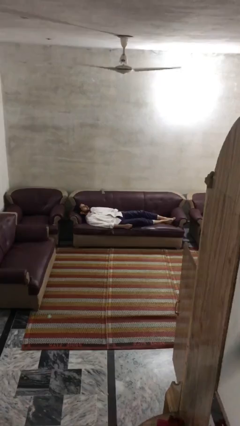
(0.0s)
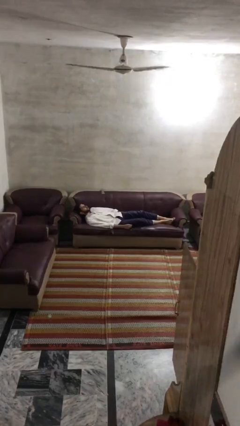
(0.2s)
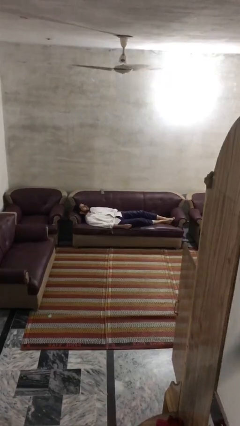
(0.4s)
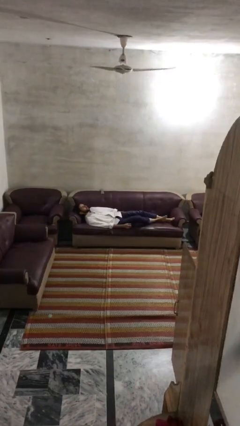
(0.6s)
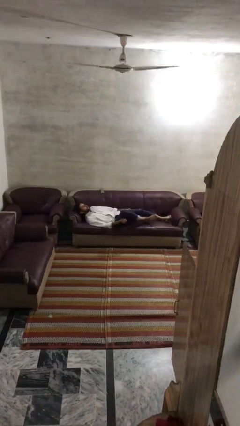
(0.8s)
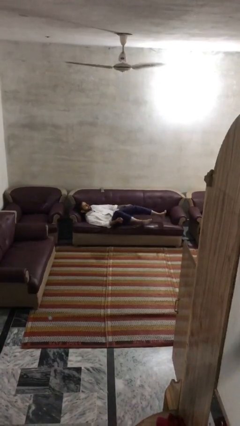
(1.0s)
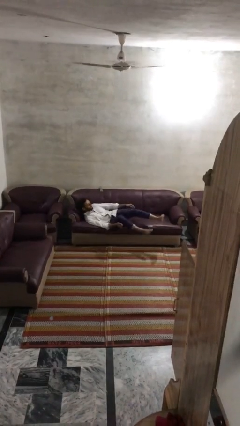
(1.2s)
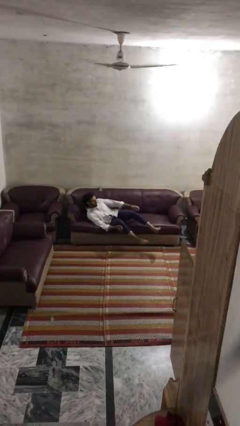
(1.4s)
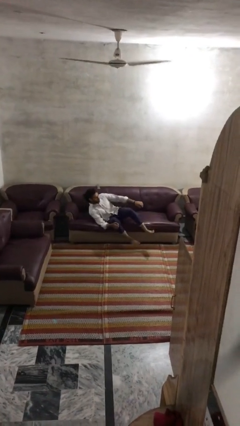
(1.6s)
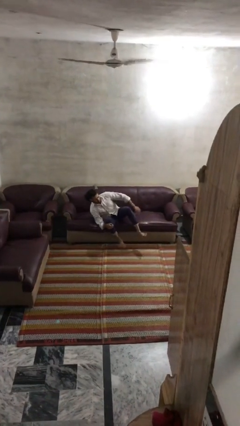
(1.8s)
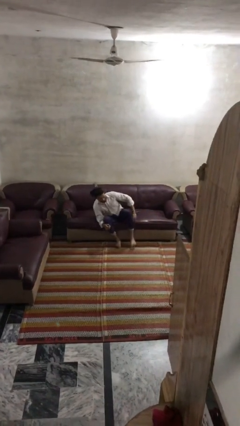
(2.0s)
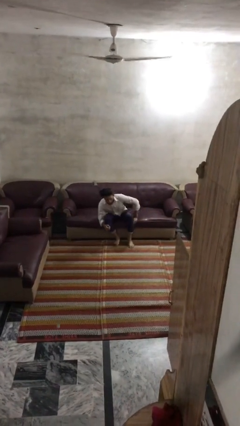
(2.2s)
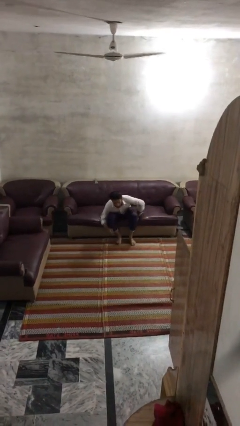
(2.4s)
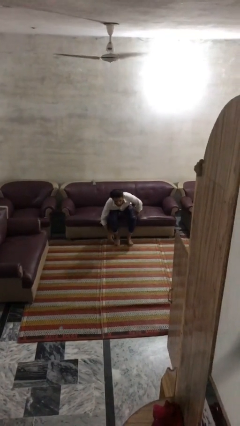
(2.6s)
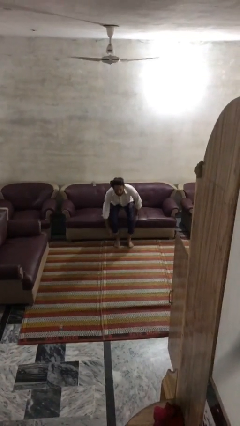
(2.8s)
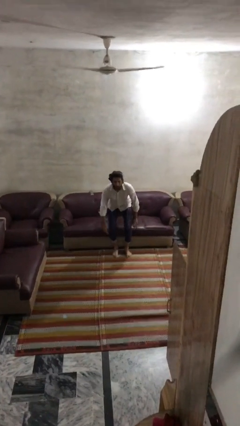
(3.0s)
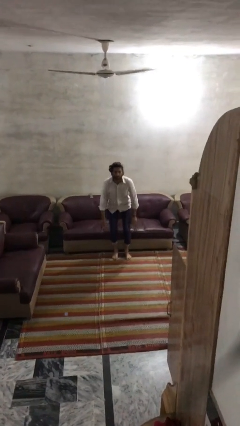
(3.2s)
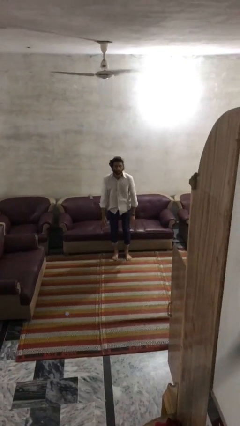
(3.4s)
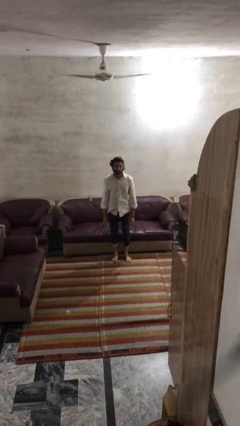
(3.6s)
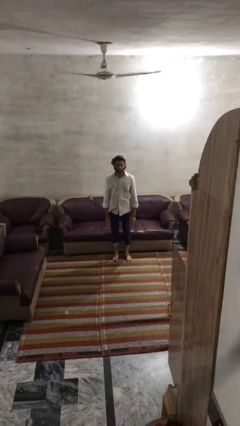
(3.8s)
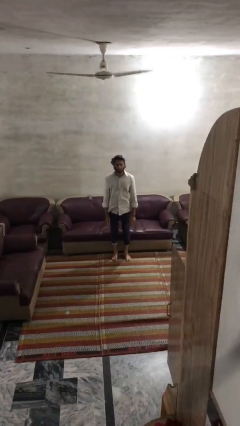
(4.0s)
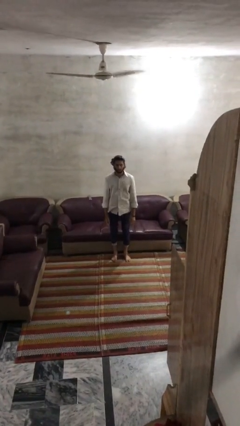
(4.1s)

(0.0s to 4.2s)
person stands up

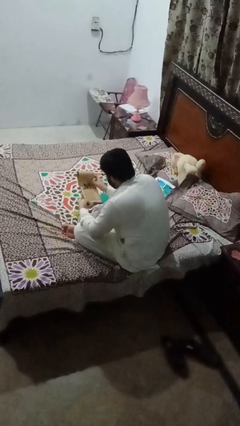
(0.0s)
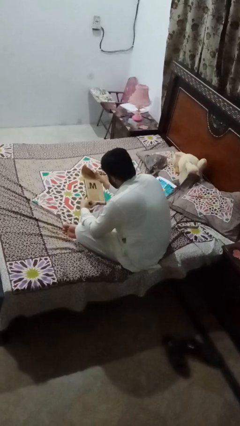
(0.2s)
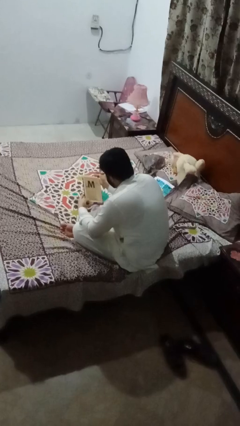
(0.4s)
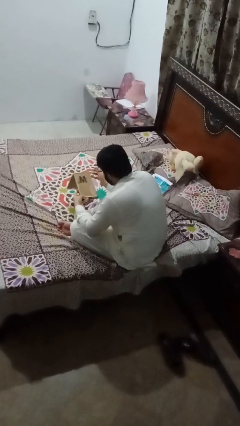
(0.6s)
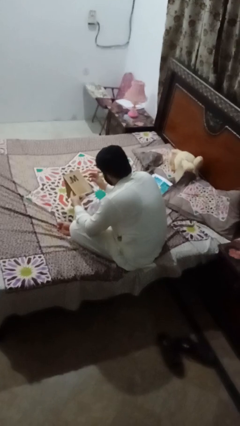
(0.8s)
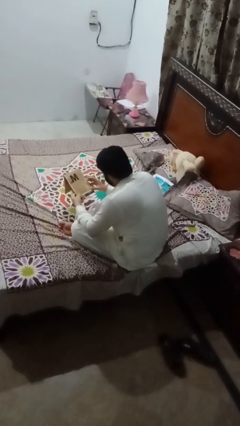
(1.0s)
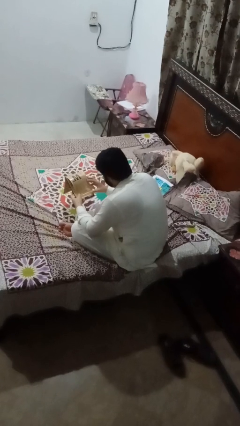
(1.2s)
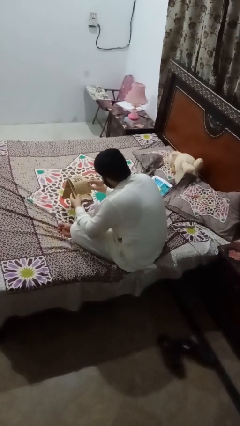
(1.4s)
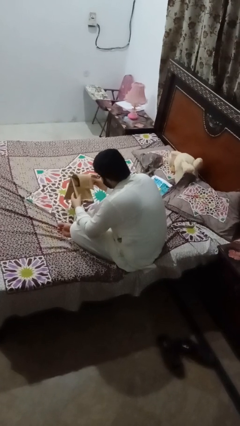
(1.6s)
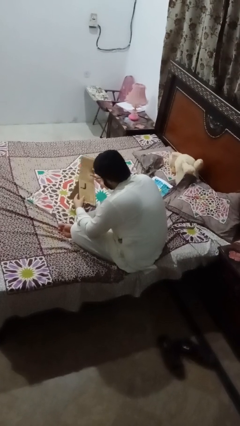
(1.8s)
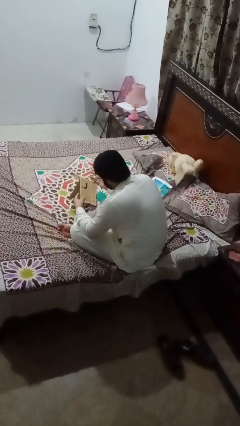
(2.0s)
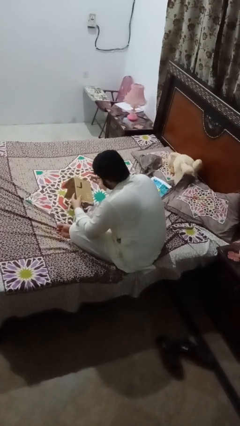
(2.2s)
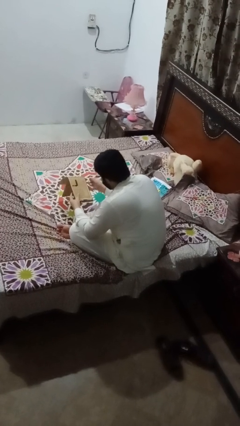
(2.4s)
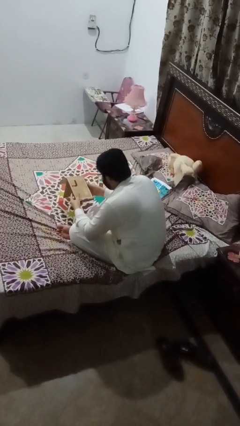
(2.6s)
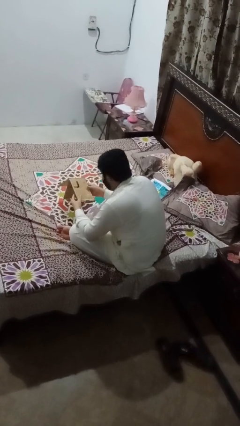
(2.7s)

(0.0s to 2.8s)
person reads magazine

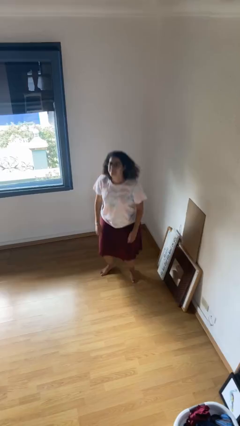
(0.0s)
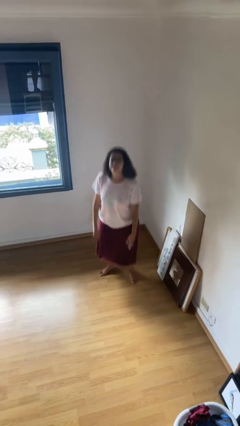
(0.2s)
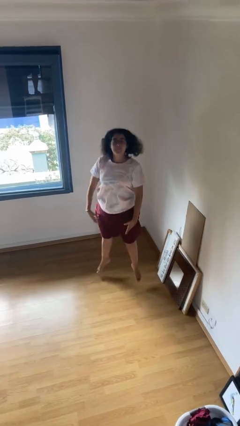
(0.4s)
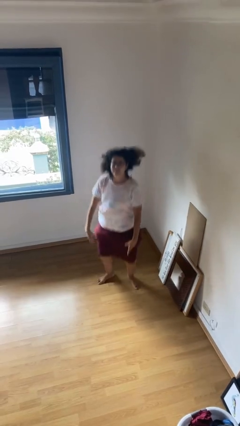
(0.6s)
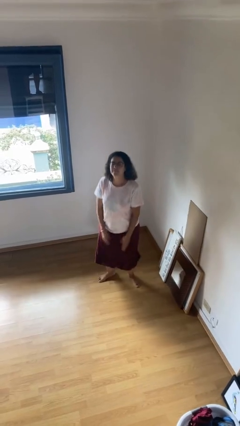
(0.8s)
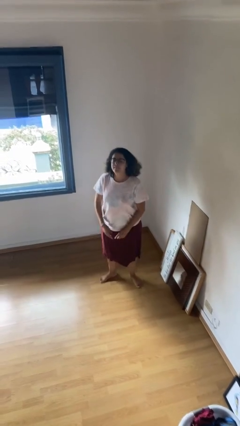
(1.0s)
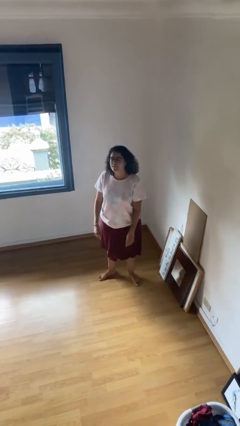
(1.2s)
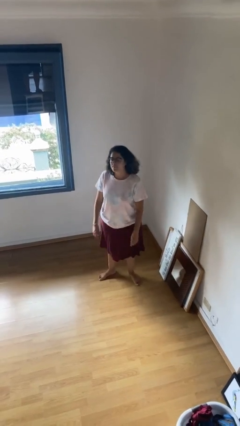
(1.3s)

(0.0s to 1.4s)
person jumps

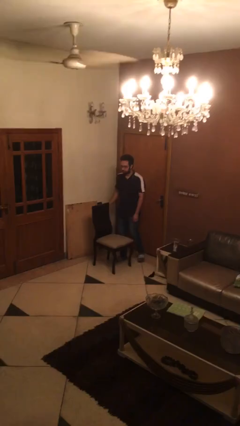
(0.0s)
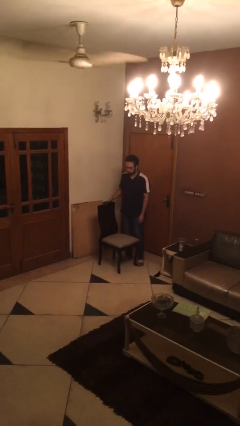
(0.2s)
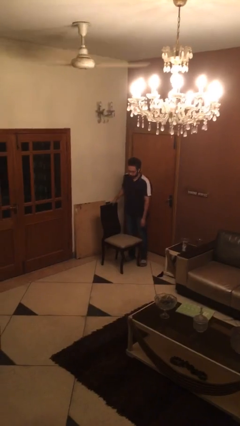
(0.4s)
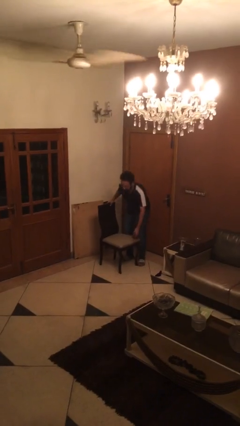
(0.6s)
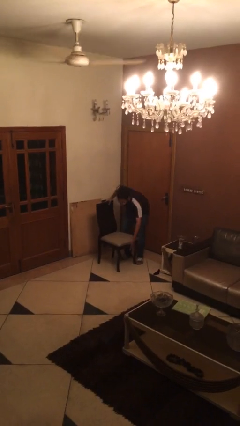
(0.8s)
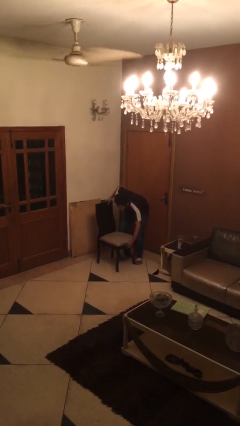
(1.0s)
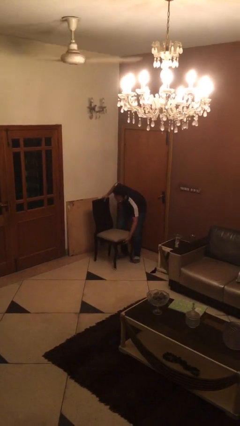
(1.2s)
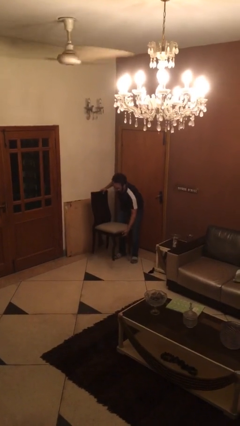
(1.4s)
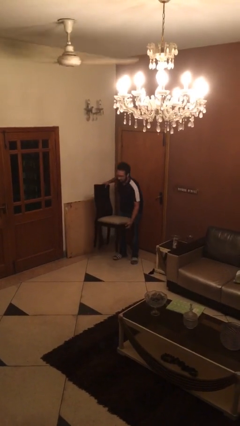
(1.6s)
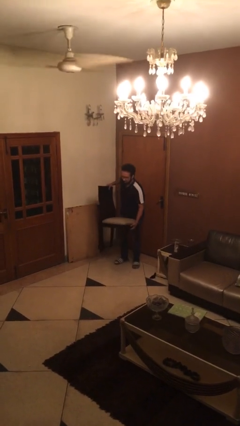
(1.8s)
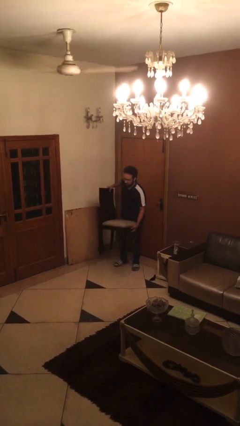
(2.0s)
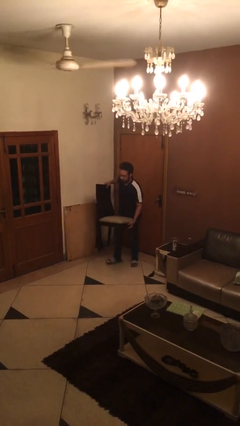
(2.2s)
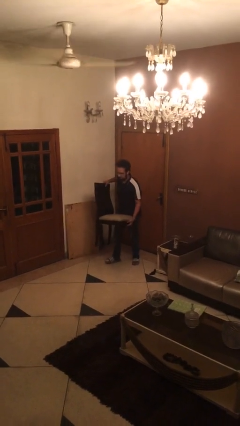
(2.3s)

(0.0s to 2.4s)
person picks up object from floor

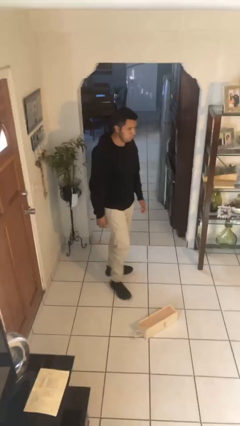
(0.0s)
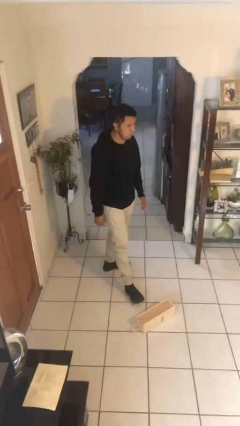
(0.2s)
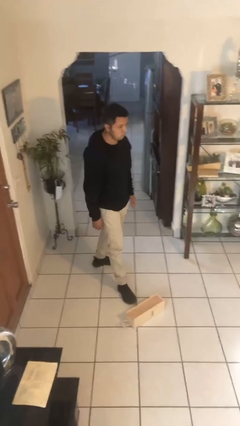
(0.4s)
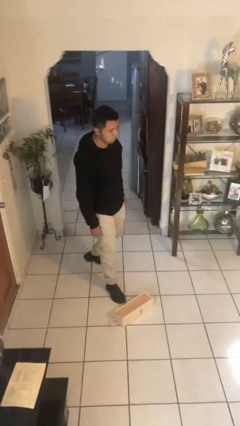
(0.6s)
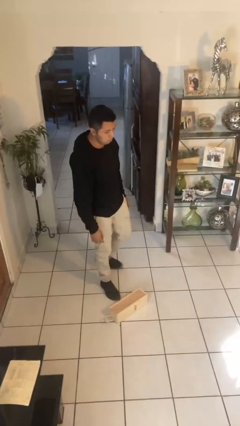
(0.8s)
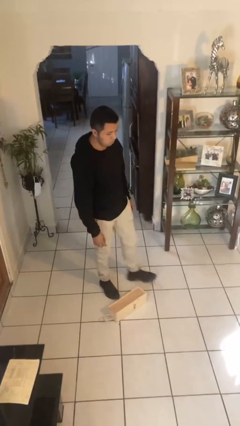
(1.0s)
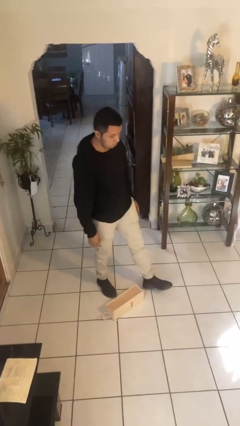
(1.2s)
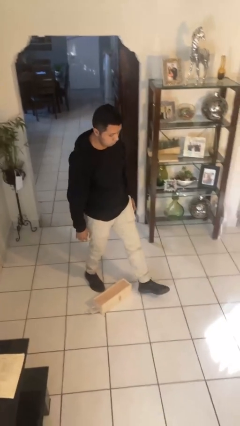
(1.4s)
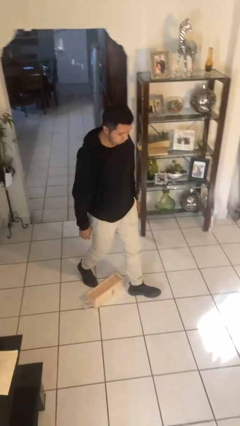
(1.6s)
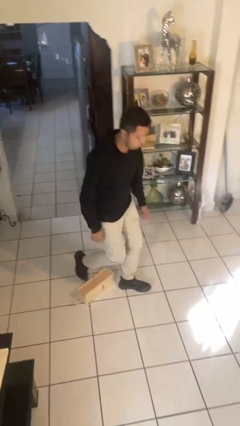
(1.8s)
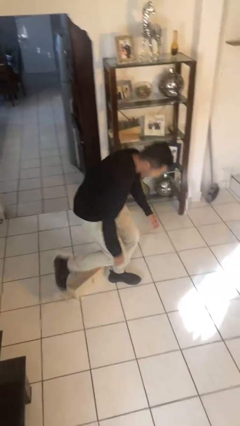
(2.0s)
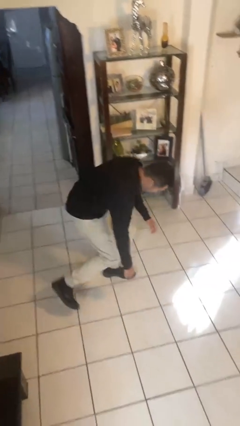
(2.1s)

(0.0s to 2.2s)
person trips on object on floor

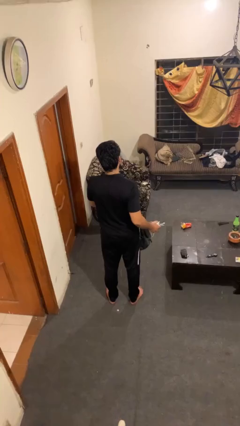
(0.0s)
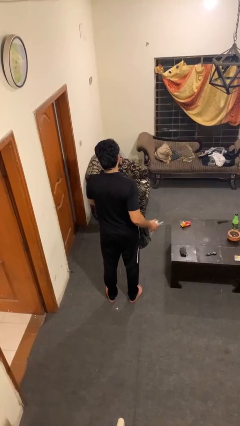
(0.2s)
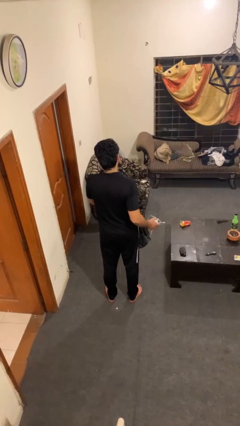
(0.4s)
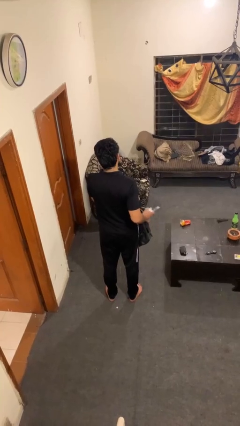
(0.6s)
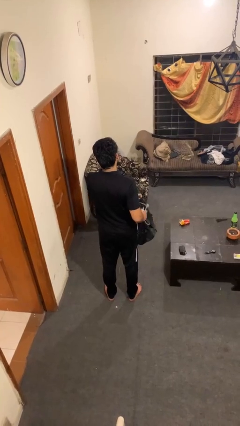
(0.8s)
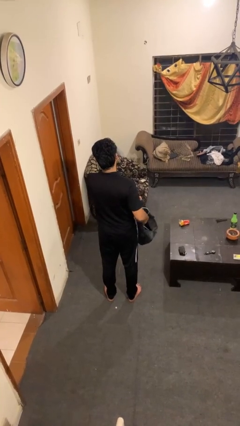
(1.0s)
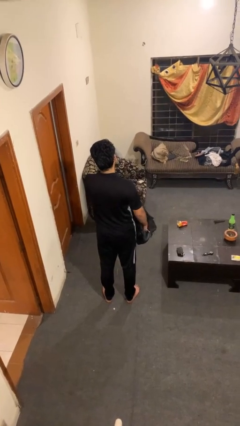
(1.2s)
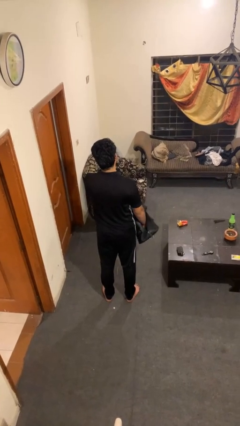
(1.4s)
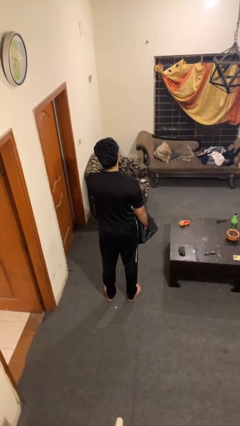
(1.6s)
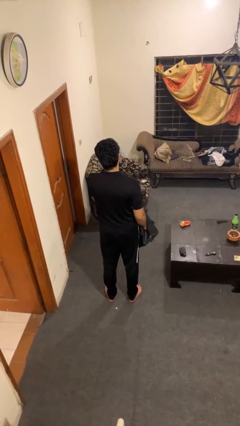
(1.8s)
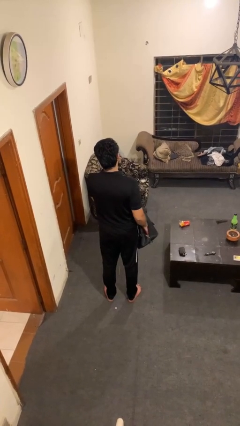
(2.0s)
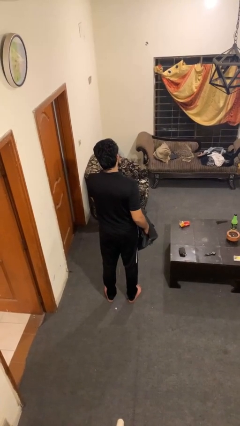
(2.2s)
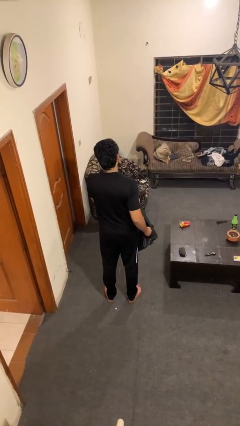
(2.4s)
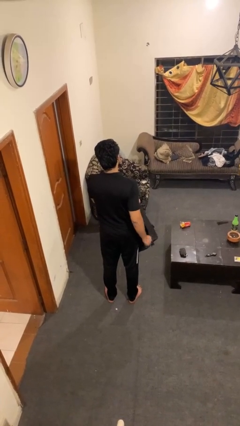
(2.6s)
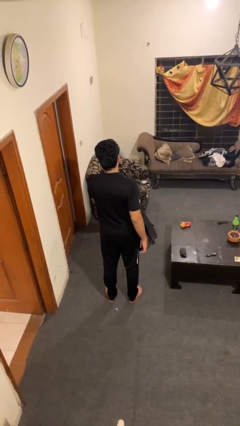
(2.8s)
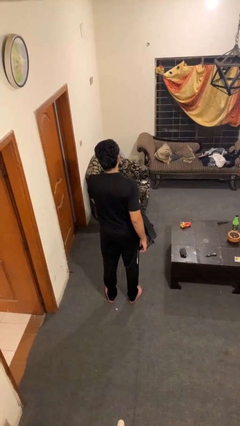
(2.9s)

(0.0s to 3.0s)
person puts object into bag

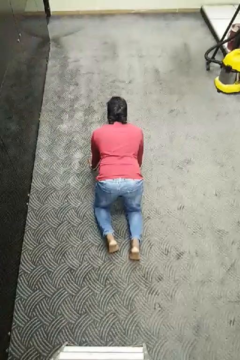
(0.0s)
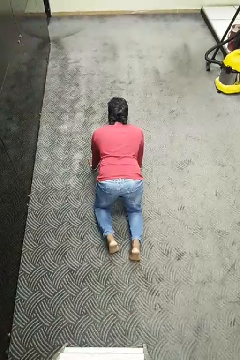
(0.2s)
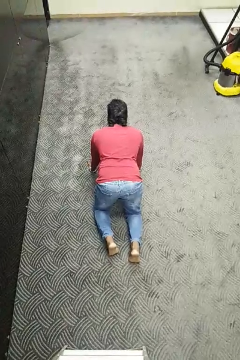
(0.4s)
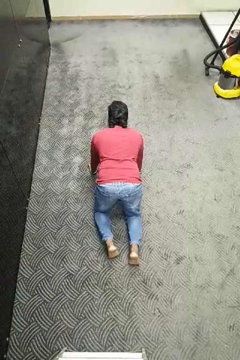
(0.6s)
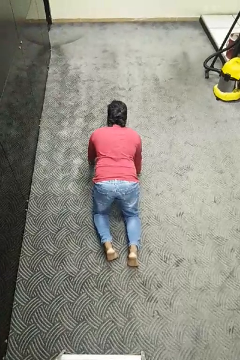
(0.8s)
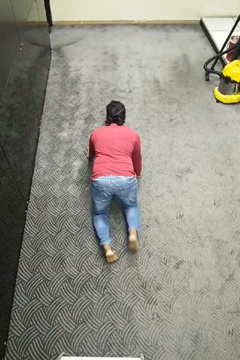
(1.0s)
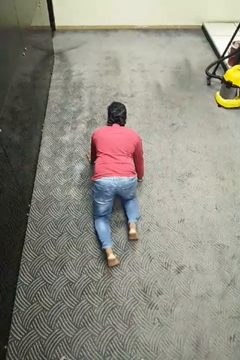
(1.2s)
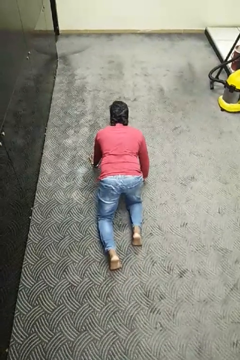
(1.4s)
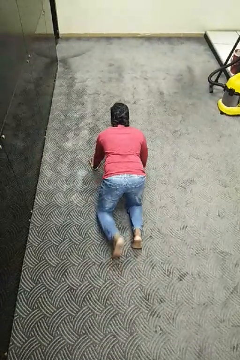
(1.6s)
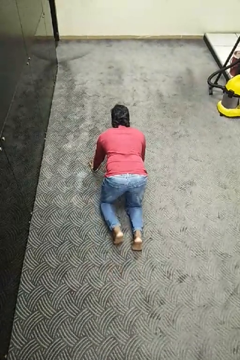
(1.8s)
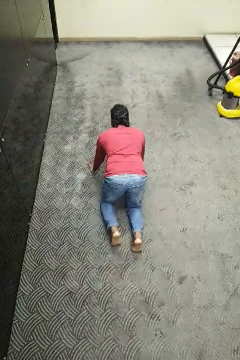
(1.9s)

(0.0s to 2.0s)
person crawls
